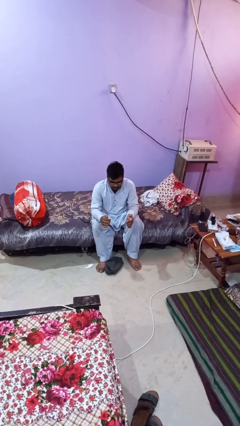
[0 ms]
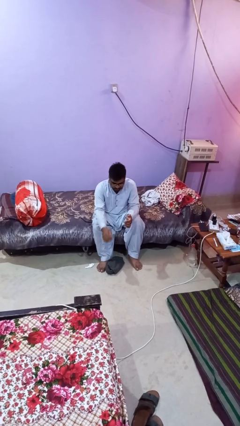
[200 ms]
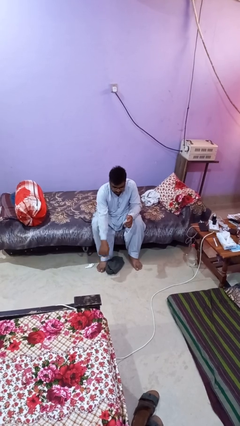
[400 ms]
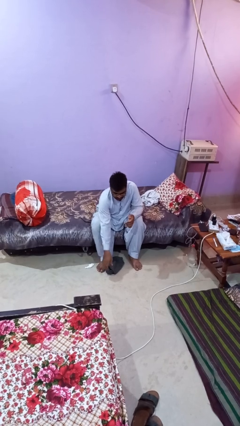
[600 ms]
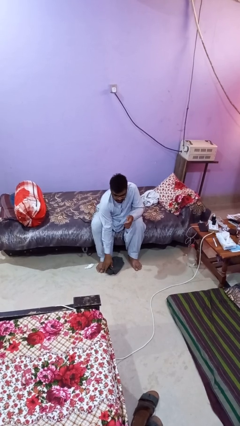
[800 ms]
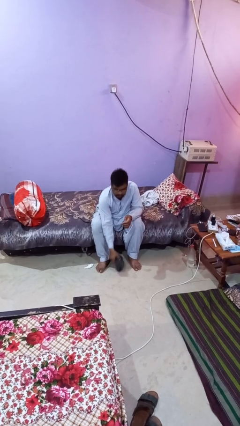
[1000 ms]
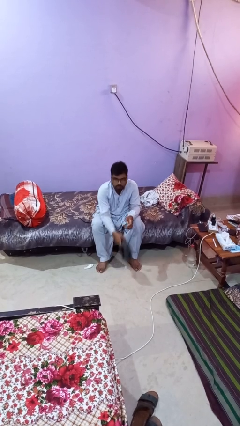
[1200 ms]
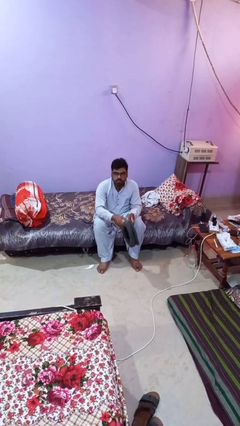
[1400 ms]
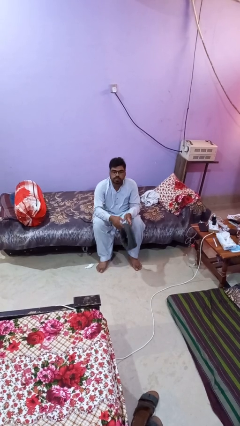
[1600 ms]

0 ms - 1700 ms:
person picks up object from floor

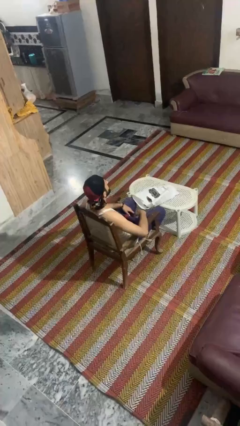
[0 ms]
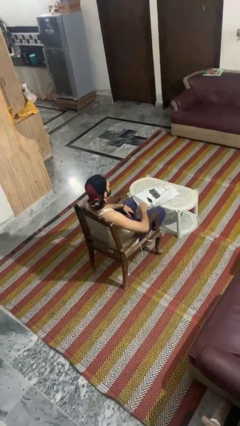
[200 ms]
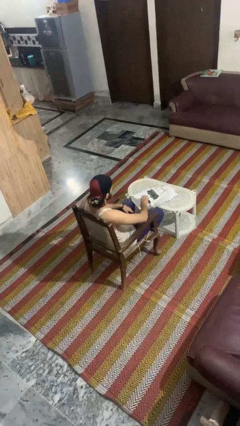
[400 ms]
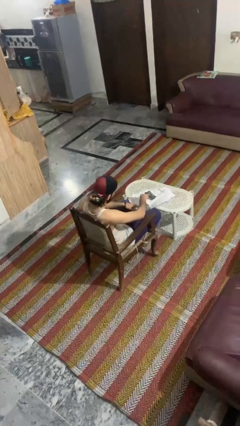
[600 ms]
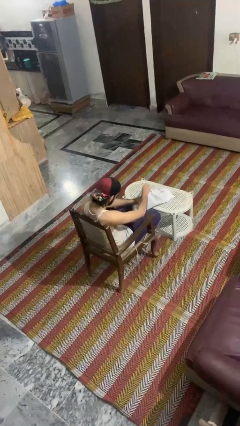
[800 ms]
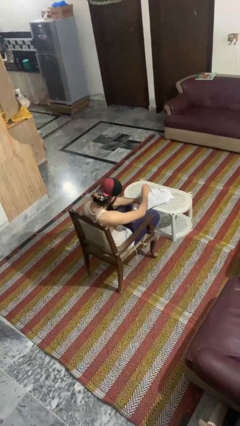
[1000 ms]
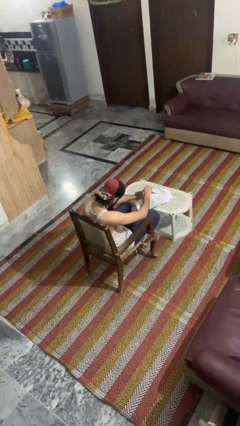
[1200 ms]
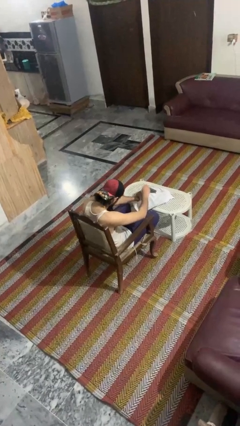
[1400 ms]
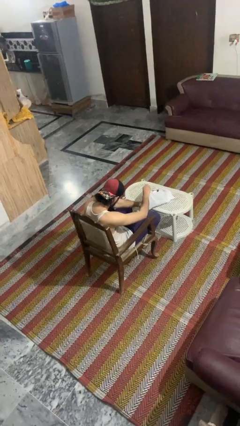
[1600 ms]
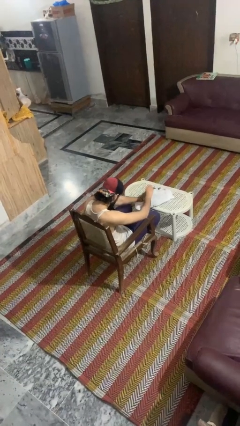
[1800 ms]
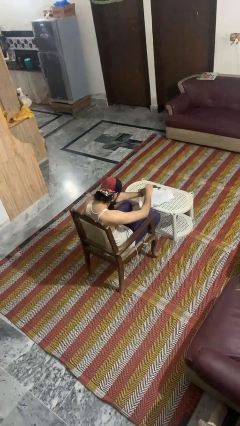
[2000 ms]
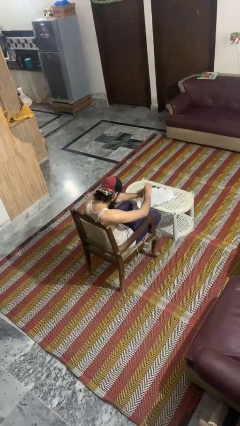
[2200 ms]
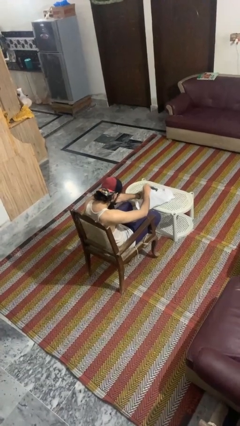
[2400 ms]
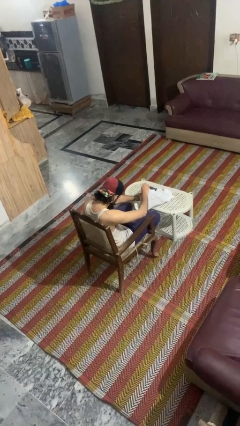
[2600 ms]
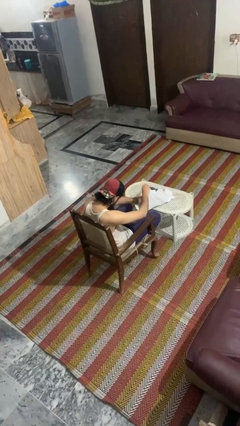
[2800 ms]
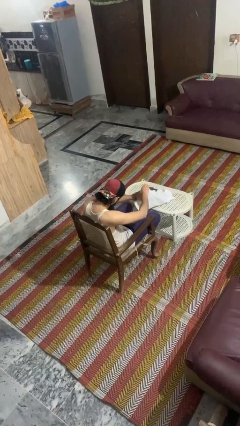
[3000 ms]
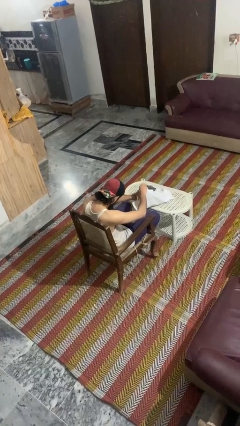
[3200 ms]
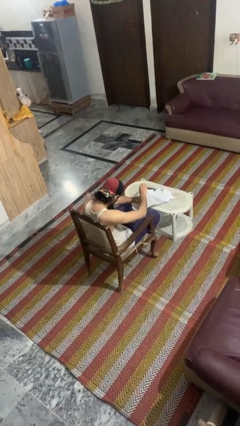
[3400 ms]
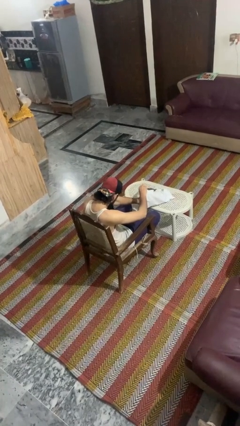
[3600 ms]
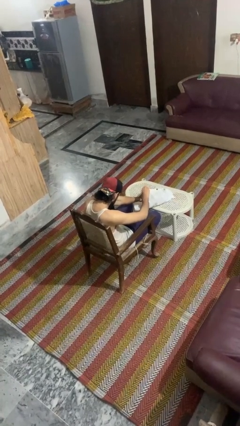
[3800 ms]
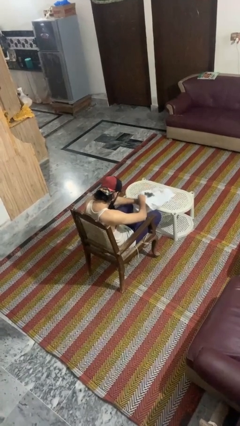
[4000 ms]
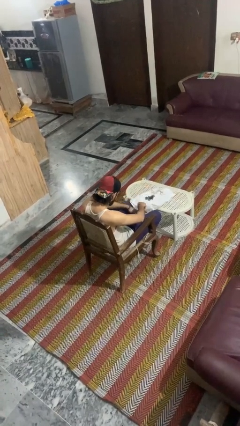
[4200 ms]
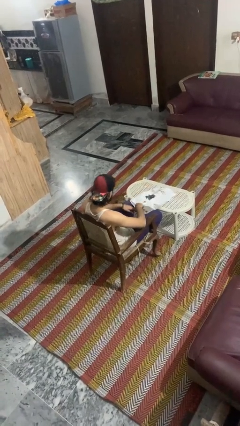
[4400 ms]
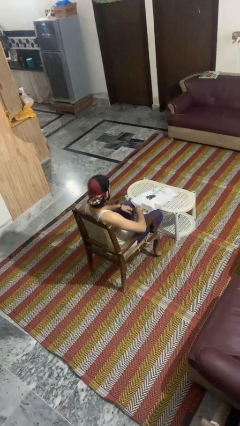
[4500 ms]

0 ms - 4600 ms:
person searches in bag

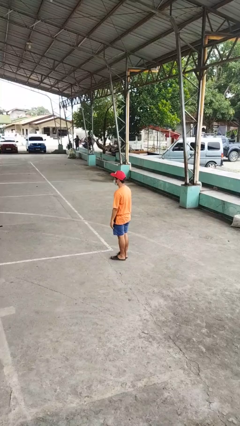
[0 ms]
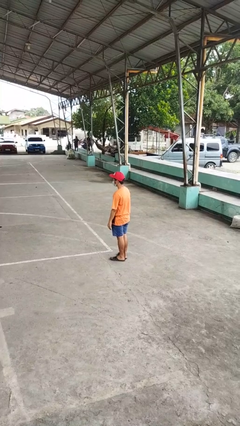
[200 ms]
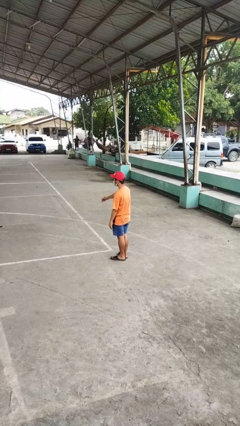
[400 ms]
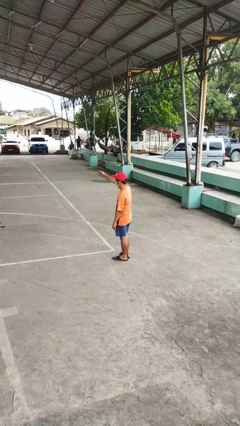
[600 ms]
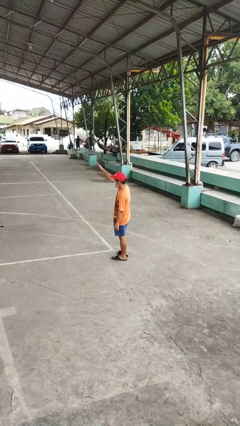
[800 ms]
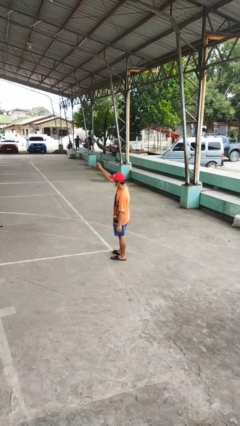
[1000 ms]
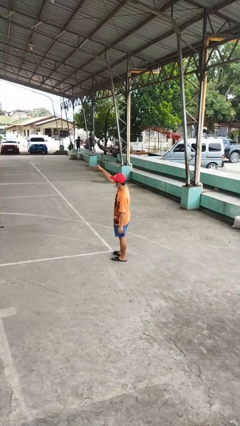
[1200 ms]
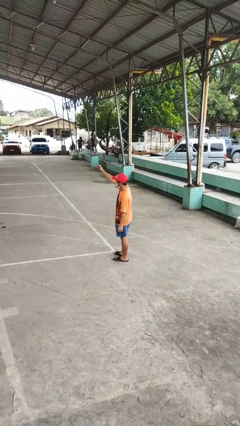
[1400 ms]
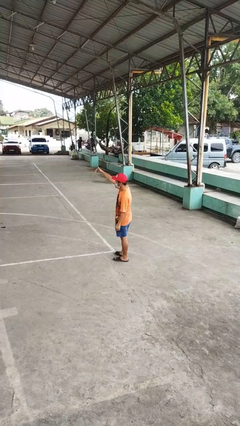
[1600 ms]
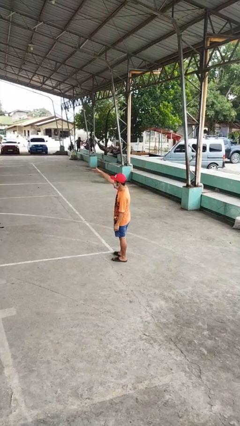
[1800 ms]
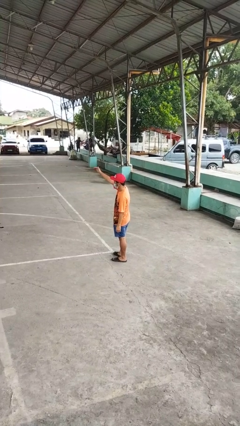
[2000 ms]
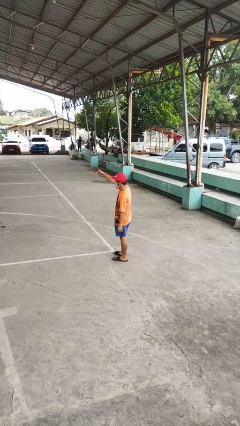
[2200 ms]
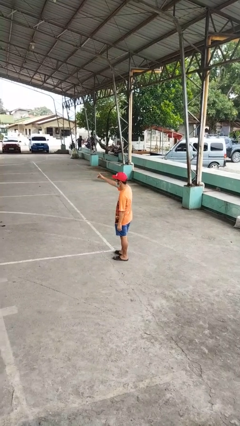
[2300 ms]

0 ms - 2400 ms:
person gestures come here

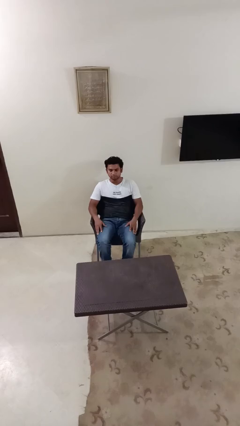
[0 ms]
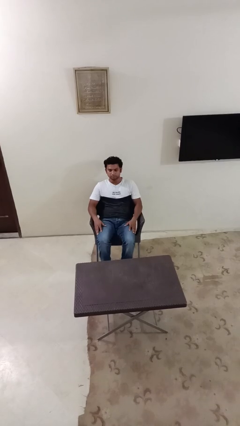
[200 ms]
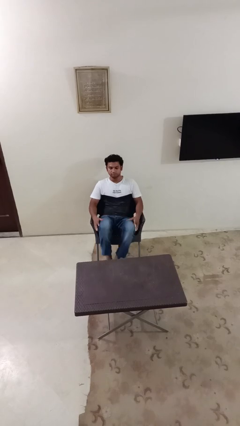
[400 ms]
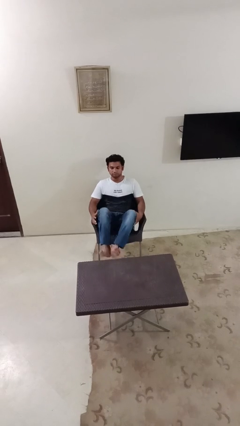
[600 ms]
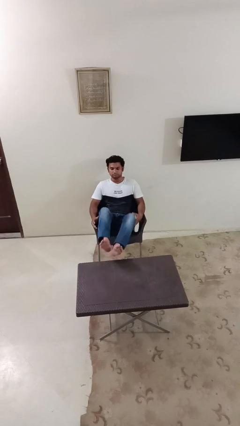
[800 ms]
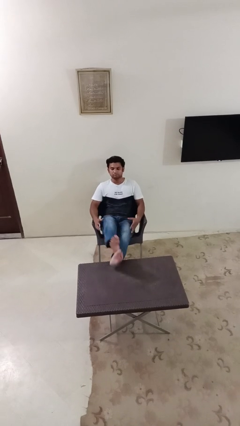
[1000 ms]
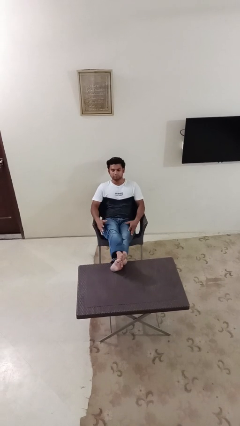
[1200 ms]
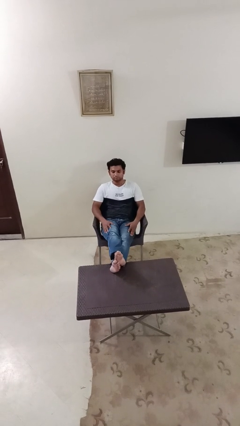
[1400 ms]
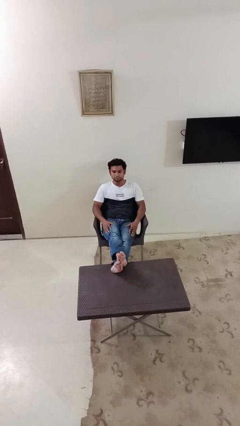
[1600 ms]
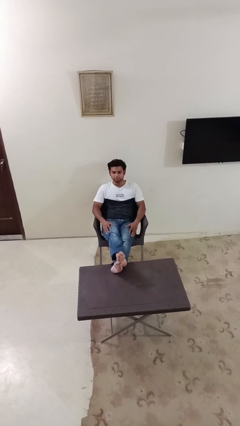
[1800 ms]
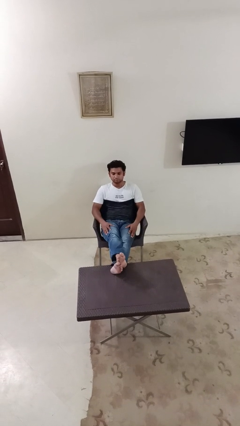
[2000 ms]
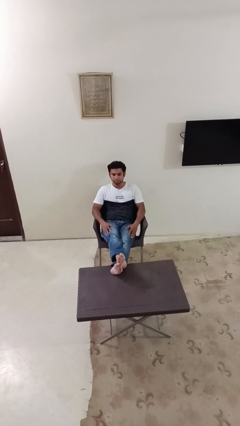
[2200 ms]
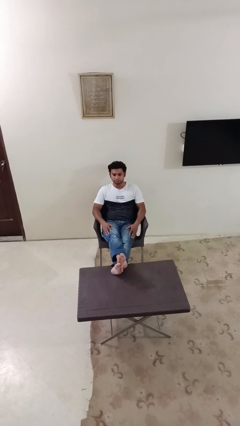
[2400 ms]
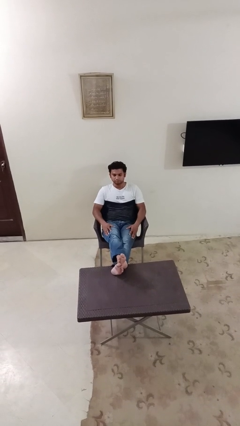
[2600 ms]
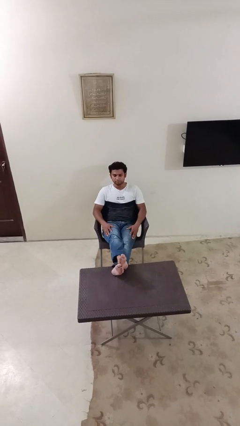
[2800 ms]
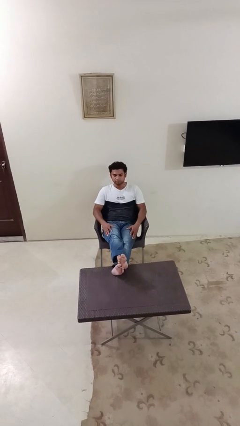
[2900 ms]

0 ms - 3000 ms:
person puts feet up

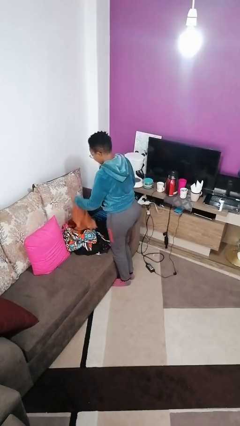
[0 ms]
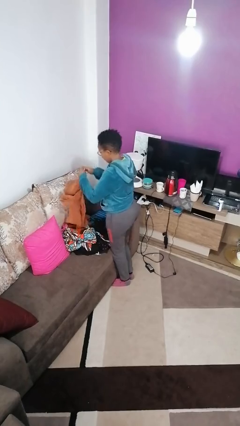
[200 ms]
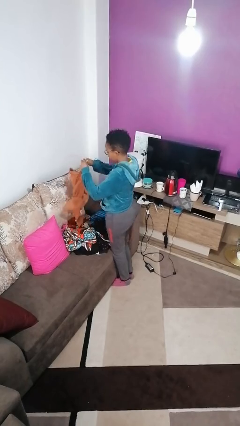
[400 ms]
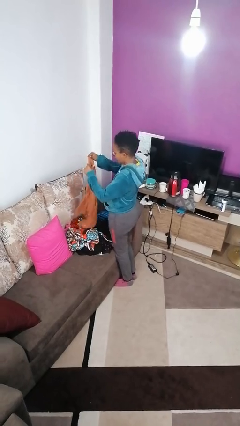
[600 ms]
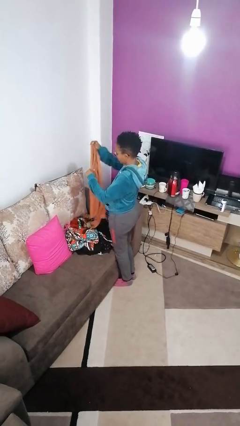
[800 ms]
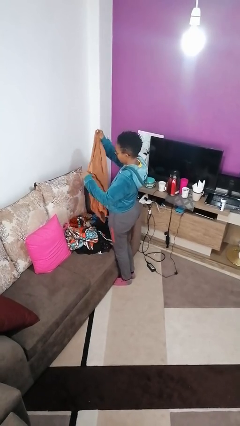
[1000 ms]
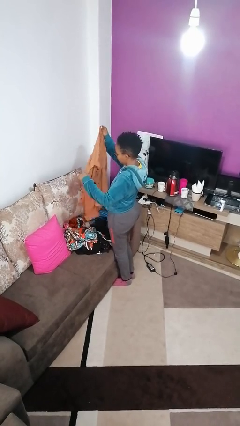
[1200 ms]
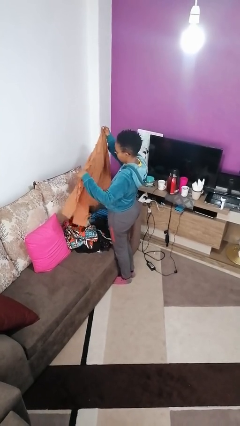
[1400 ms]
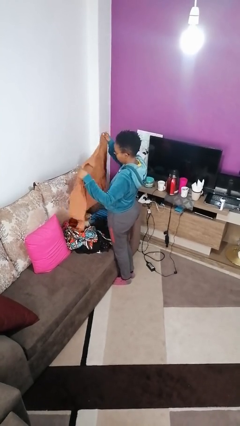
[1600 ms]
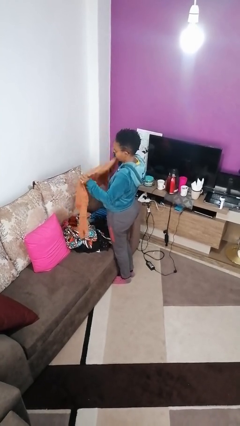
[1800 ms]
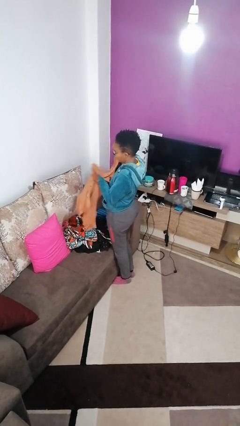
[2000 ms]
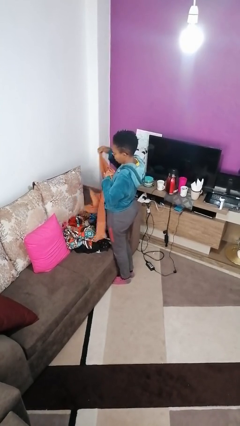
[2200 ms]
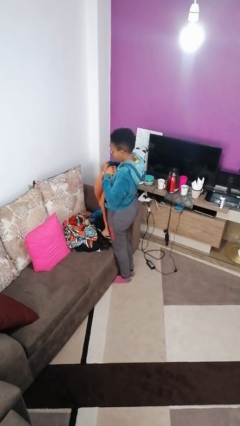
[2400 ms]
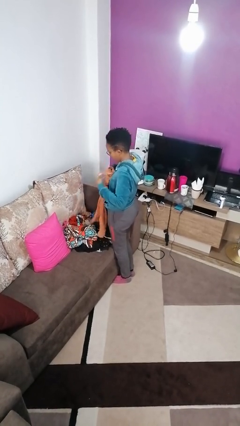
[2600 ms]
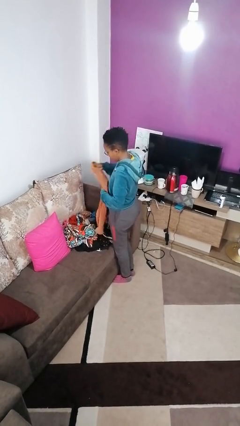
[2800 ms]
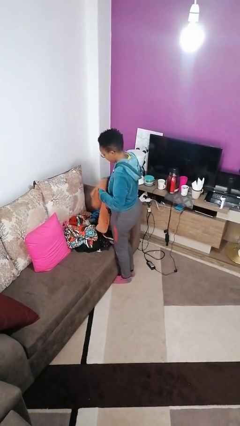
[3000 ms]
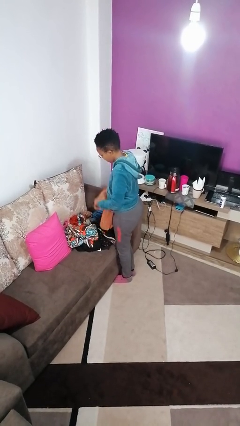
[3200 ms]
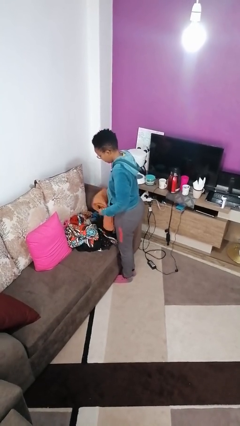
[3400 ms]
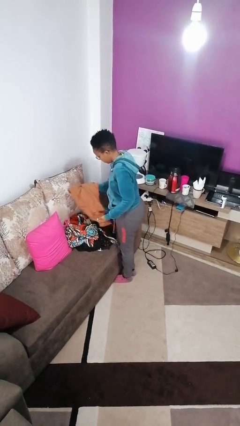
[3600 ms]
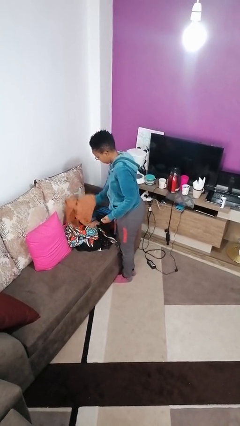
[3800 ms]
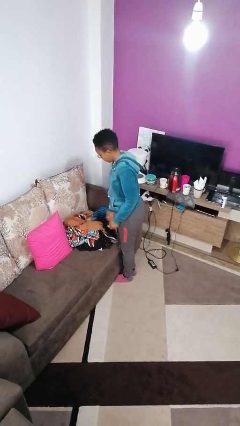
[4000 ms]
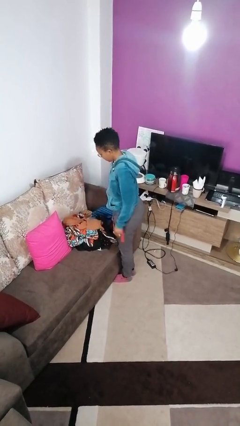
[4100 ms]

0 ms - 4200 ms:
person folds shirt

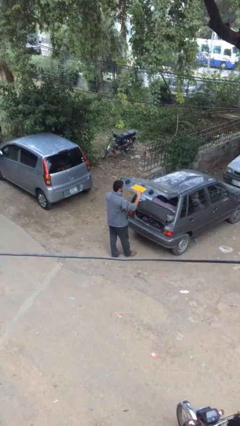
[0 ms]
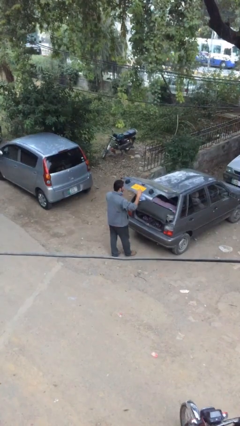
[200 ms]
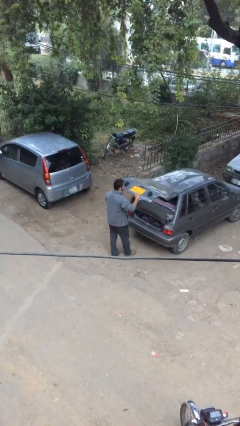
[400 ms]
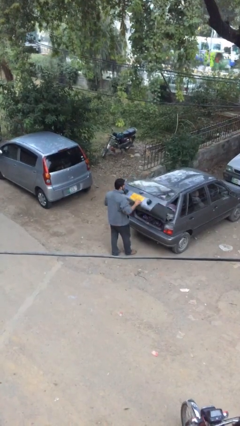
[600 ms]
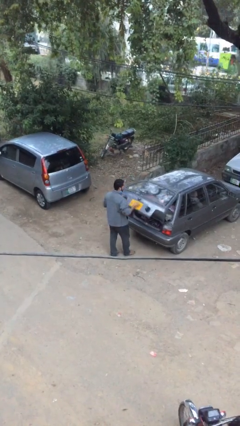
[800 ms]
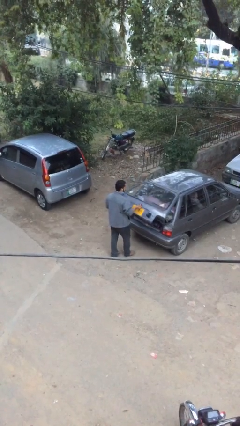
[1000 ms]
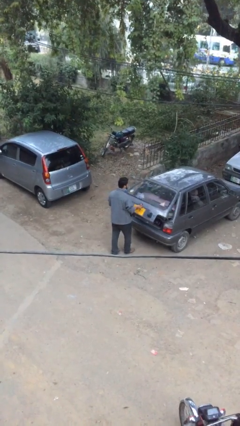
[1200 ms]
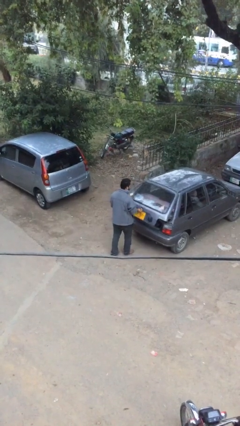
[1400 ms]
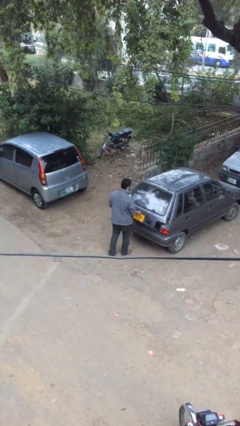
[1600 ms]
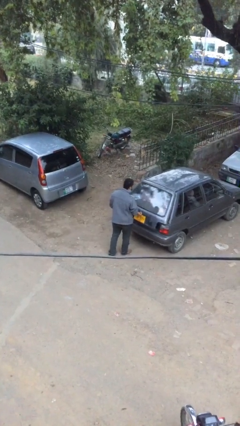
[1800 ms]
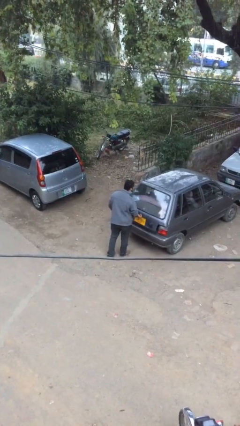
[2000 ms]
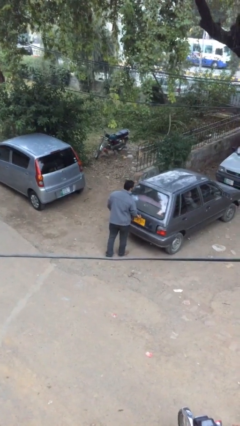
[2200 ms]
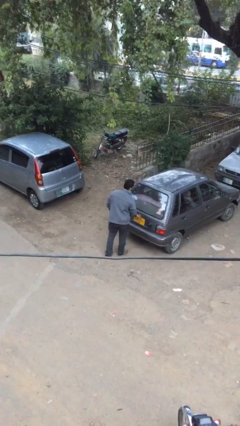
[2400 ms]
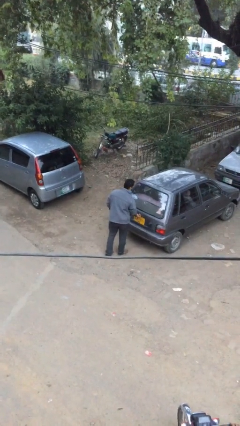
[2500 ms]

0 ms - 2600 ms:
person closes car trunk
